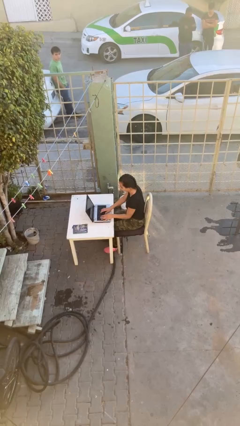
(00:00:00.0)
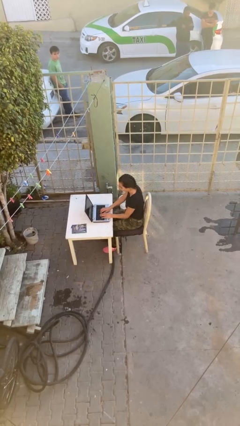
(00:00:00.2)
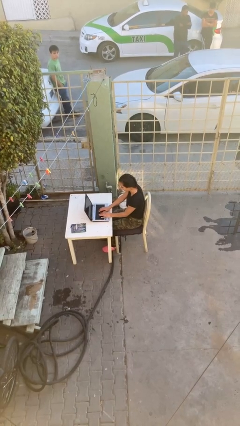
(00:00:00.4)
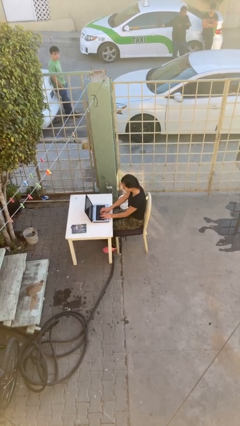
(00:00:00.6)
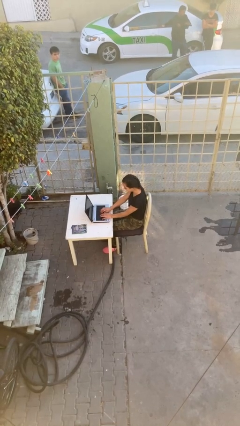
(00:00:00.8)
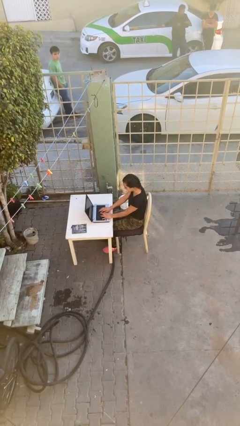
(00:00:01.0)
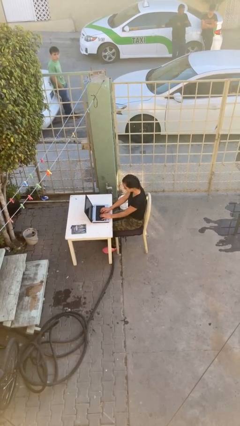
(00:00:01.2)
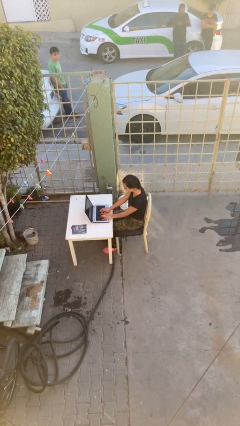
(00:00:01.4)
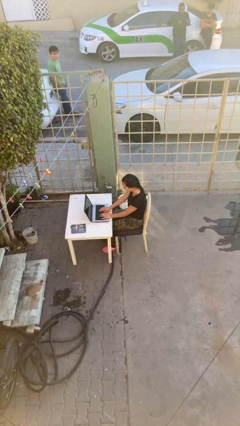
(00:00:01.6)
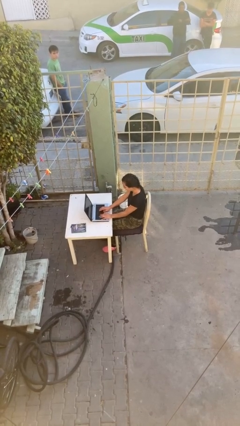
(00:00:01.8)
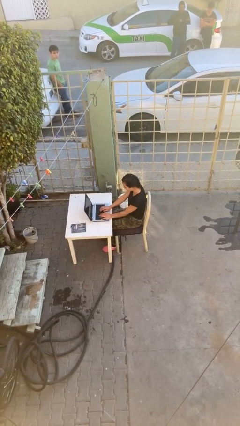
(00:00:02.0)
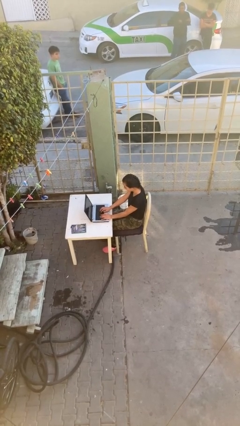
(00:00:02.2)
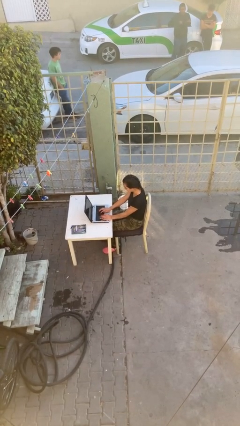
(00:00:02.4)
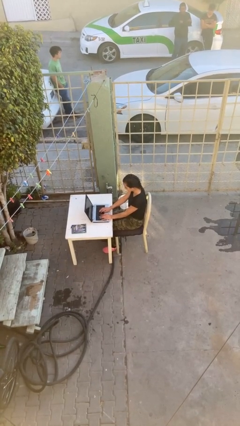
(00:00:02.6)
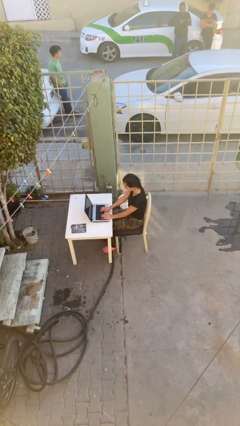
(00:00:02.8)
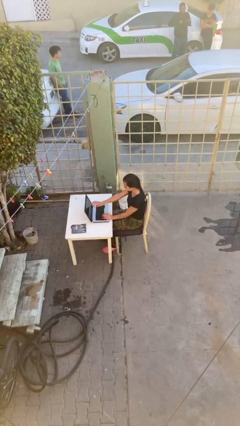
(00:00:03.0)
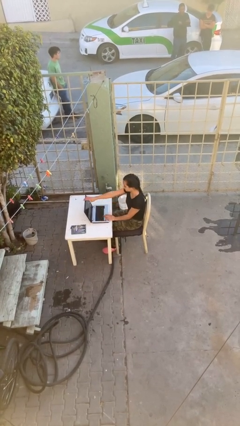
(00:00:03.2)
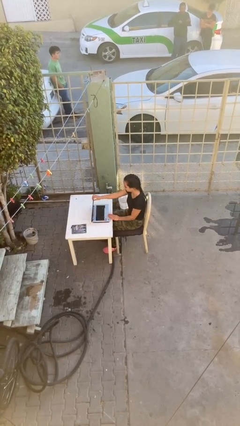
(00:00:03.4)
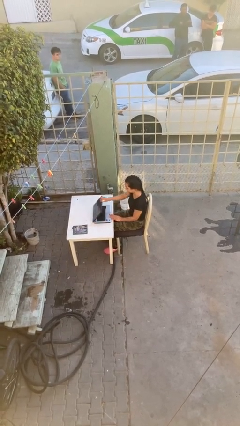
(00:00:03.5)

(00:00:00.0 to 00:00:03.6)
person interacts with laptop

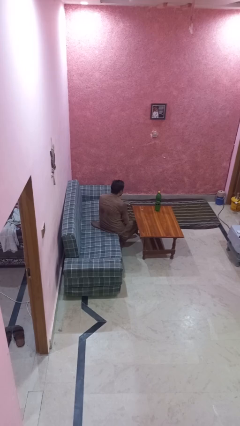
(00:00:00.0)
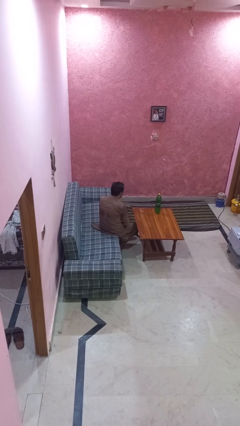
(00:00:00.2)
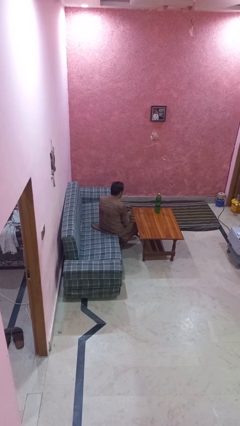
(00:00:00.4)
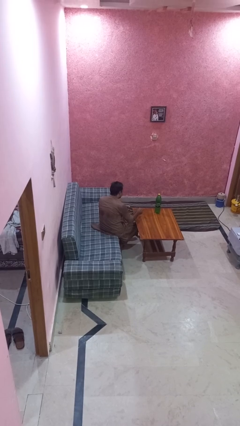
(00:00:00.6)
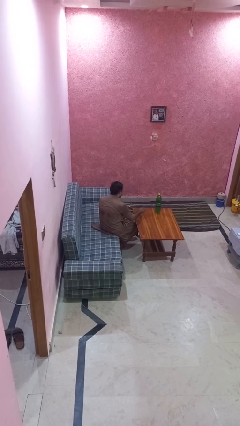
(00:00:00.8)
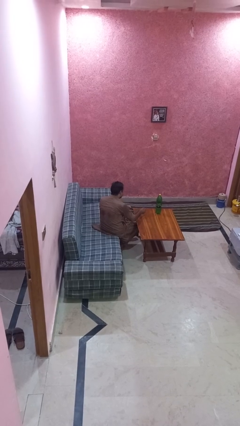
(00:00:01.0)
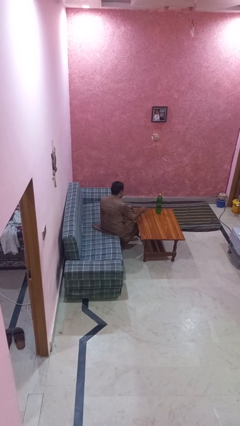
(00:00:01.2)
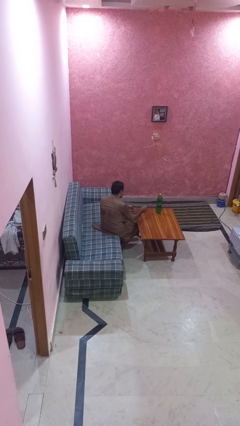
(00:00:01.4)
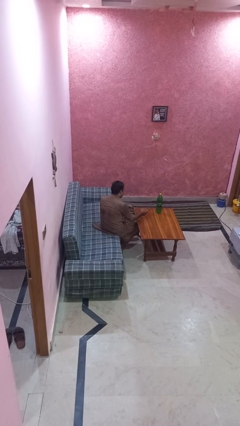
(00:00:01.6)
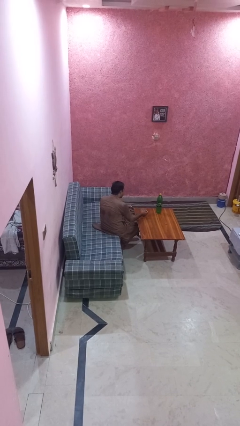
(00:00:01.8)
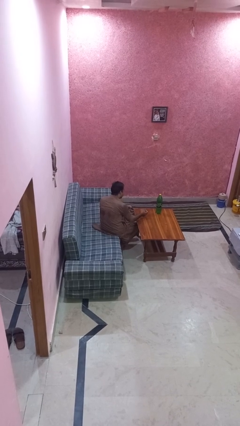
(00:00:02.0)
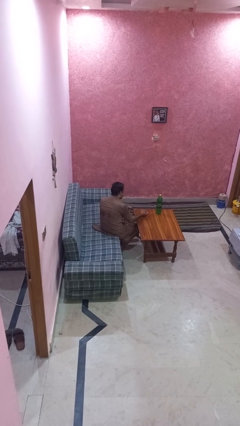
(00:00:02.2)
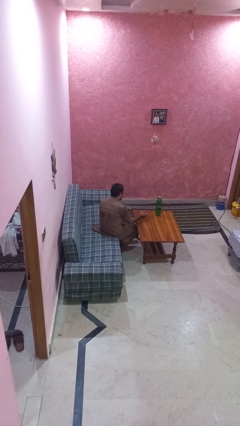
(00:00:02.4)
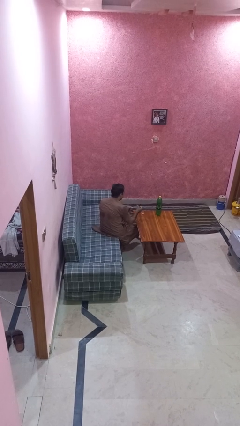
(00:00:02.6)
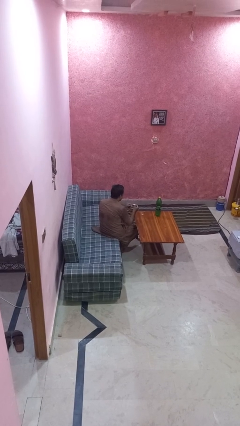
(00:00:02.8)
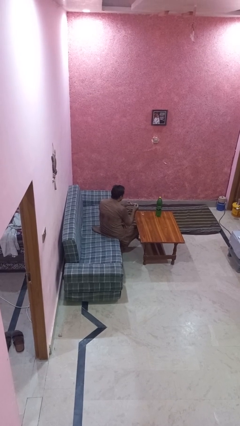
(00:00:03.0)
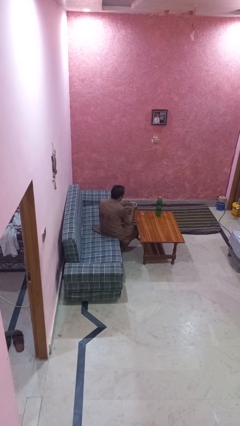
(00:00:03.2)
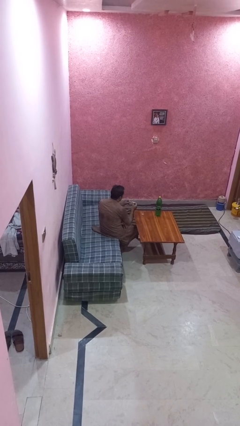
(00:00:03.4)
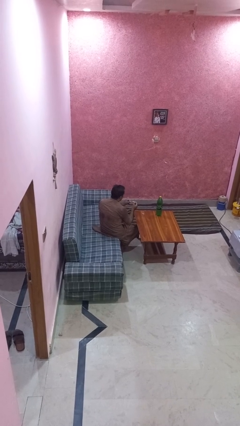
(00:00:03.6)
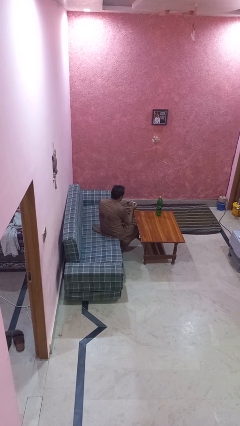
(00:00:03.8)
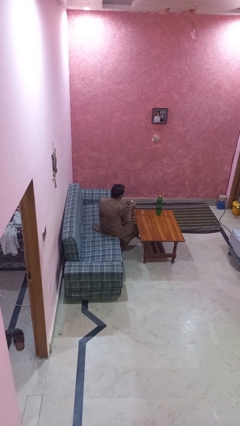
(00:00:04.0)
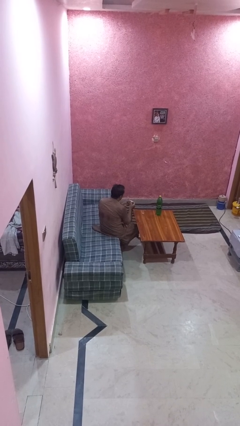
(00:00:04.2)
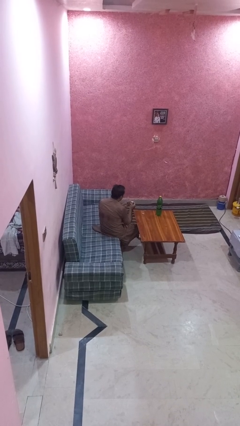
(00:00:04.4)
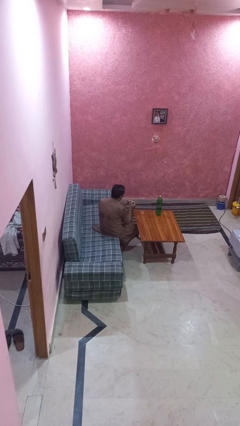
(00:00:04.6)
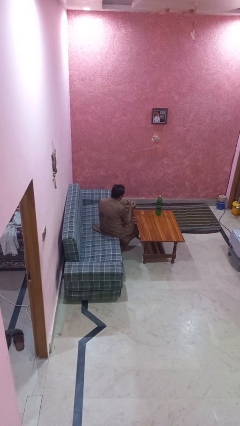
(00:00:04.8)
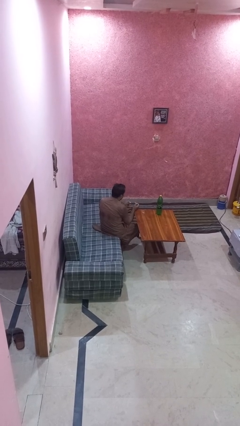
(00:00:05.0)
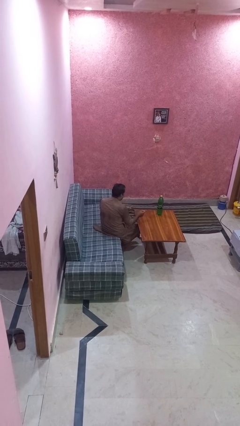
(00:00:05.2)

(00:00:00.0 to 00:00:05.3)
person paints fingernails

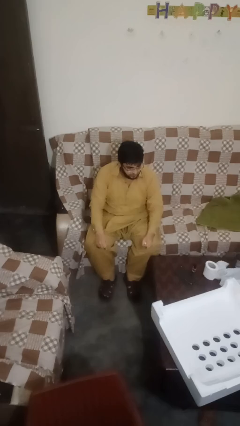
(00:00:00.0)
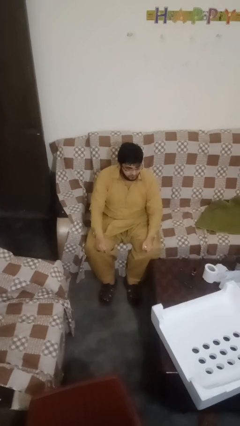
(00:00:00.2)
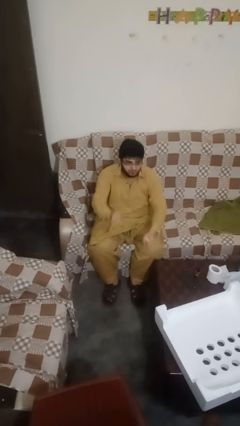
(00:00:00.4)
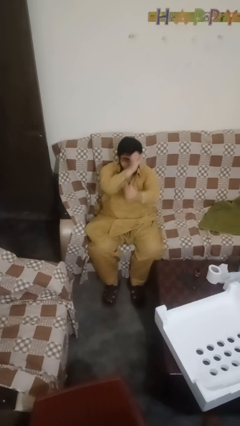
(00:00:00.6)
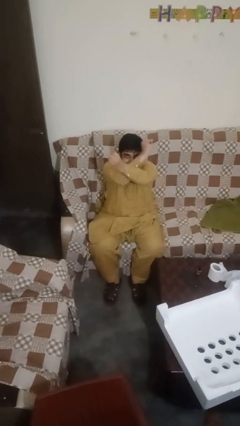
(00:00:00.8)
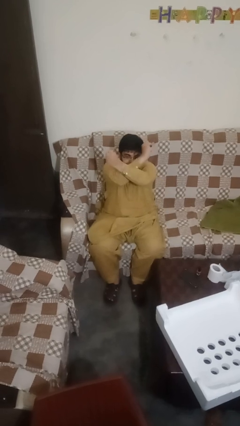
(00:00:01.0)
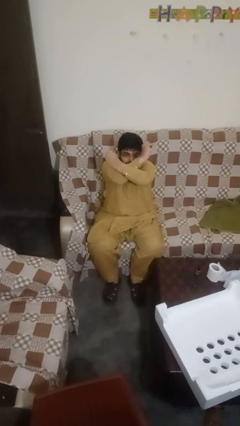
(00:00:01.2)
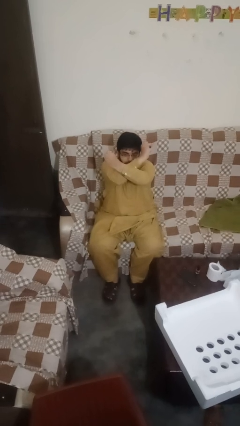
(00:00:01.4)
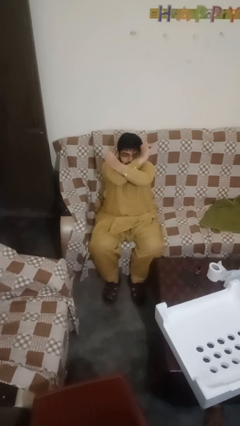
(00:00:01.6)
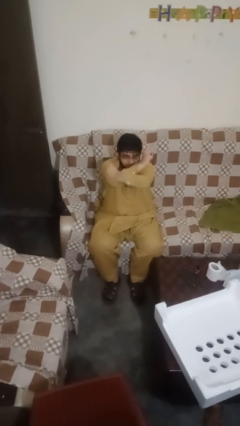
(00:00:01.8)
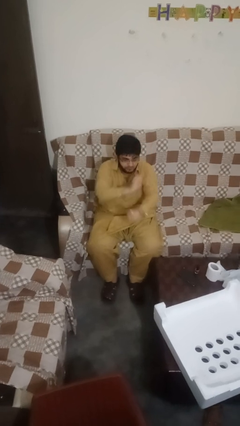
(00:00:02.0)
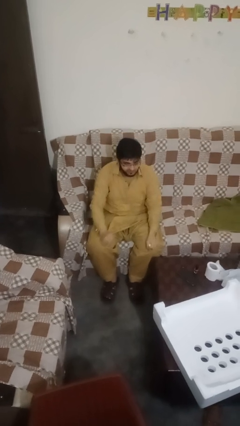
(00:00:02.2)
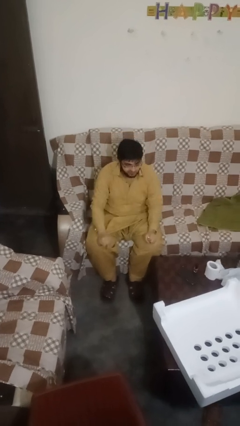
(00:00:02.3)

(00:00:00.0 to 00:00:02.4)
person gestures arms x

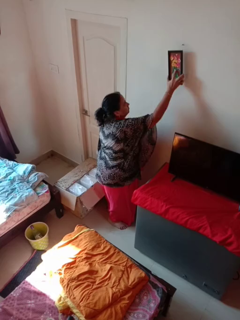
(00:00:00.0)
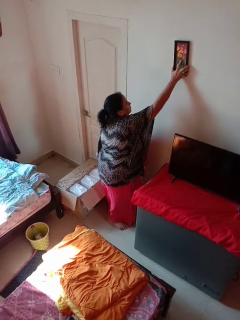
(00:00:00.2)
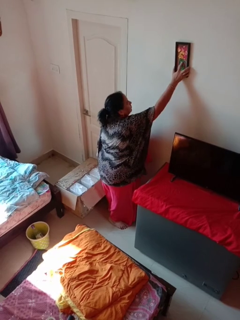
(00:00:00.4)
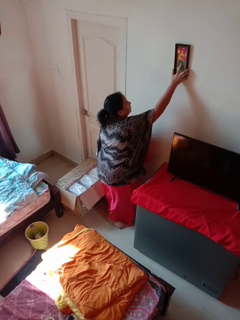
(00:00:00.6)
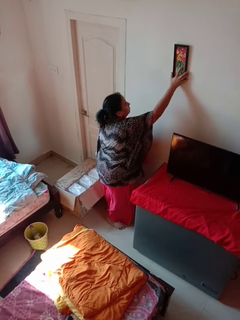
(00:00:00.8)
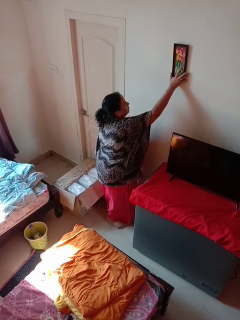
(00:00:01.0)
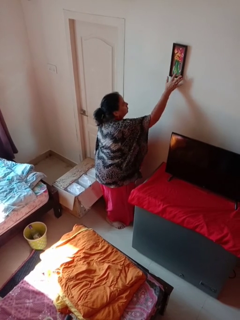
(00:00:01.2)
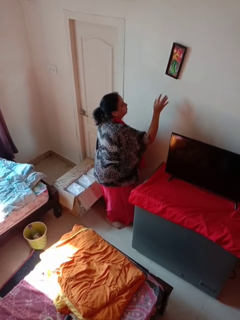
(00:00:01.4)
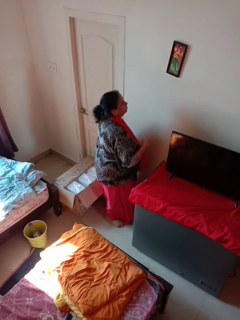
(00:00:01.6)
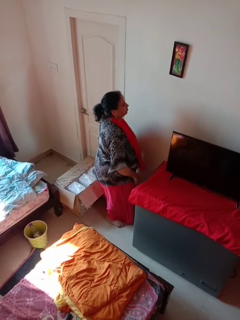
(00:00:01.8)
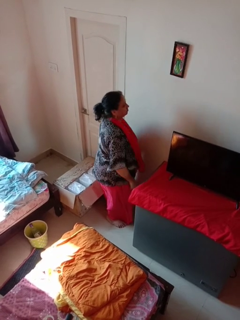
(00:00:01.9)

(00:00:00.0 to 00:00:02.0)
person puts up picture frame

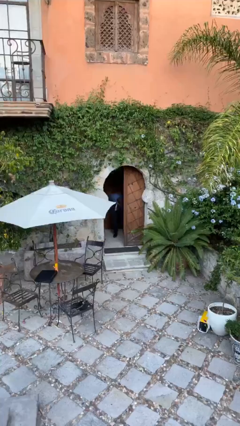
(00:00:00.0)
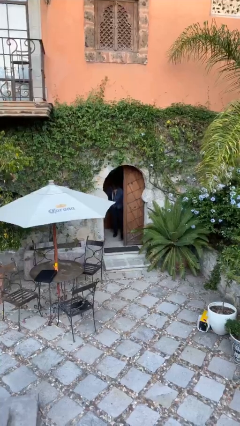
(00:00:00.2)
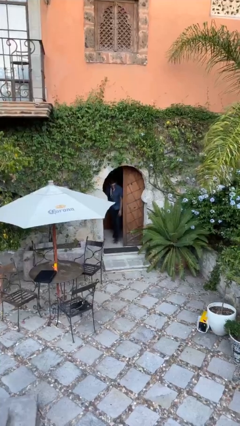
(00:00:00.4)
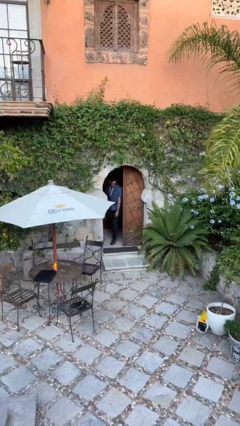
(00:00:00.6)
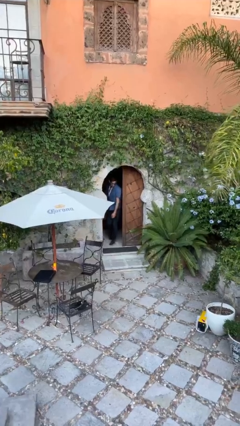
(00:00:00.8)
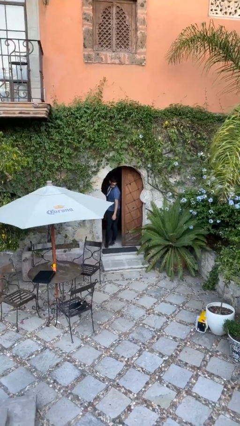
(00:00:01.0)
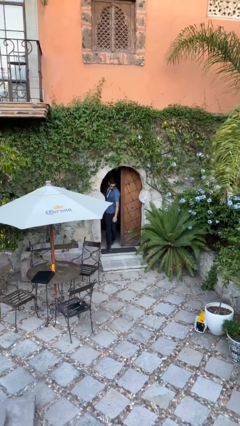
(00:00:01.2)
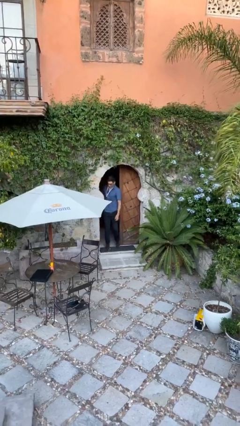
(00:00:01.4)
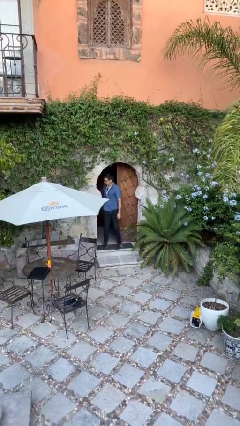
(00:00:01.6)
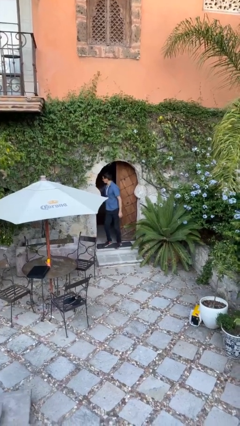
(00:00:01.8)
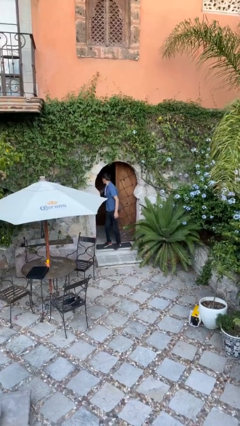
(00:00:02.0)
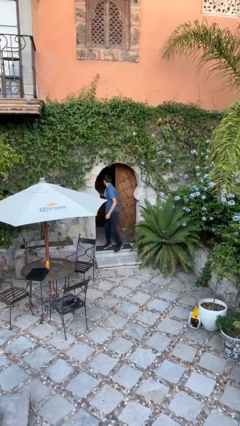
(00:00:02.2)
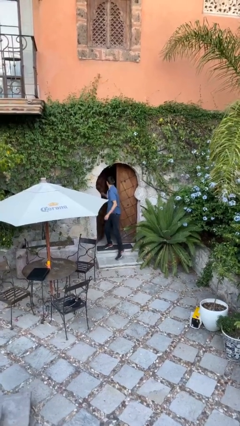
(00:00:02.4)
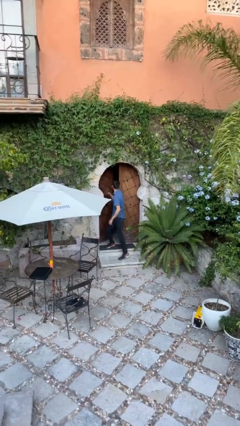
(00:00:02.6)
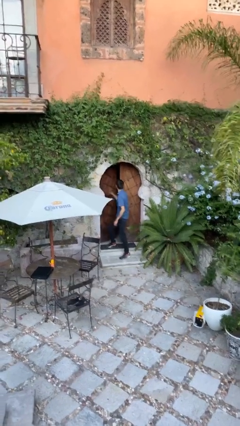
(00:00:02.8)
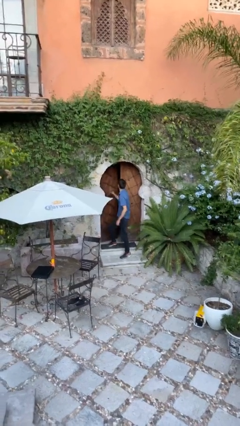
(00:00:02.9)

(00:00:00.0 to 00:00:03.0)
person enters scene through structure

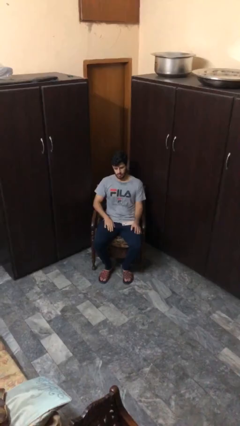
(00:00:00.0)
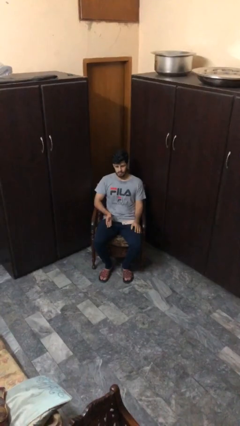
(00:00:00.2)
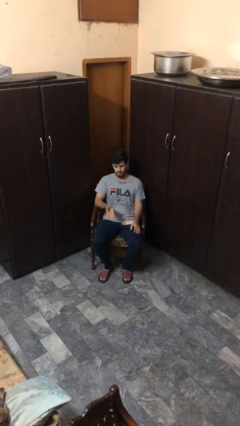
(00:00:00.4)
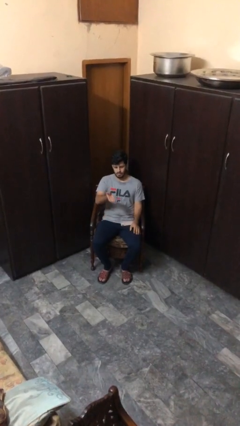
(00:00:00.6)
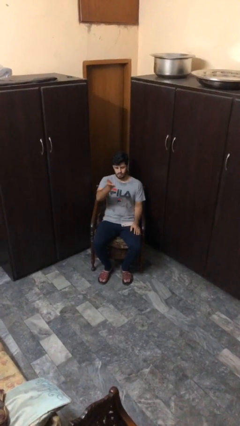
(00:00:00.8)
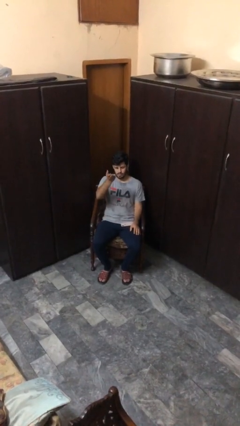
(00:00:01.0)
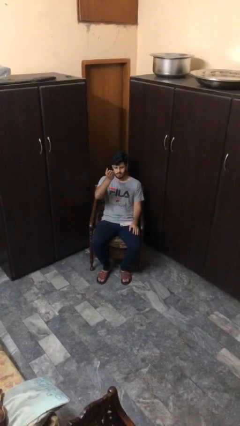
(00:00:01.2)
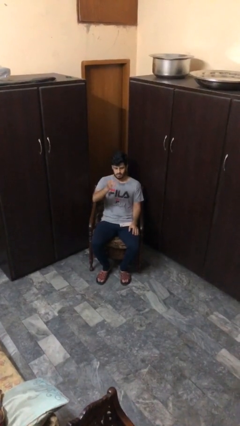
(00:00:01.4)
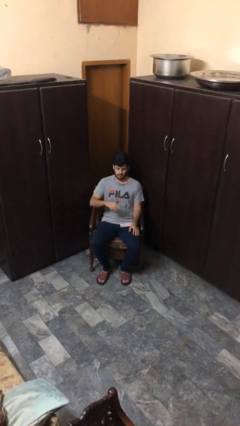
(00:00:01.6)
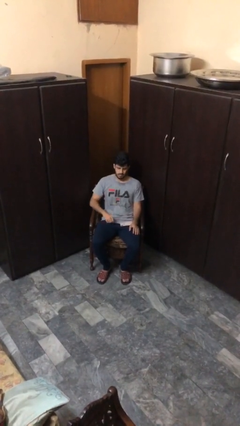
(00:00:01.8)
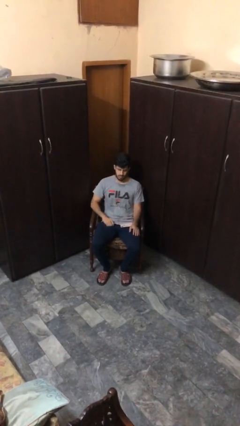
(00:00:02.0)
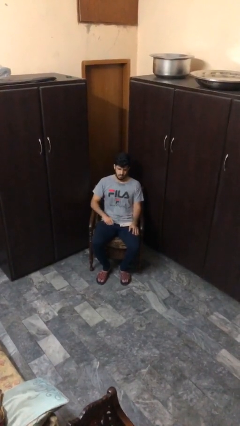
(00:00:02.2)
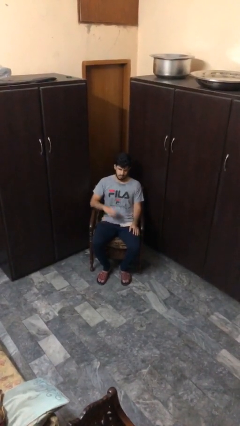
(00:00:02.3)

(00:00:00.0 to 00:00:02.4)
person gestures swipe up
